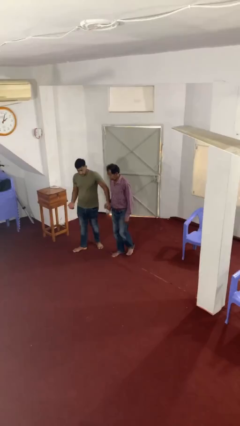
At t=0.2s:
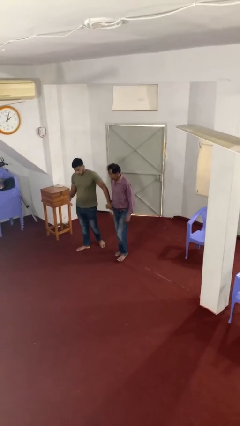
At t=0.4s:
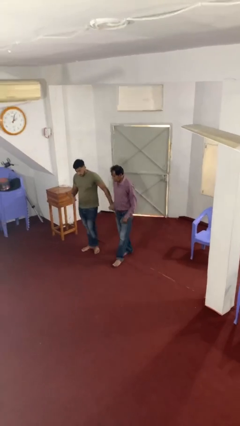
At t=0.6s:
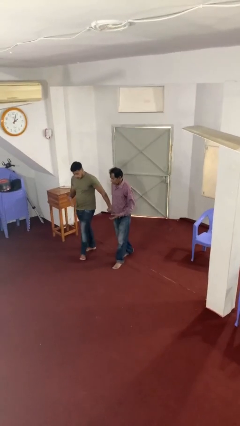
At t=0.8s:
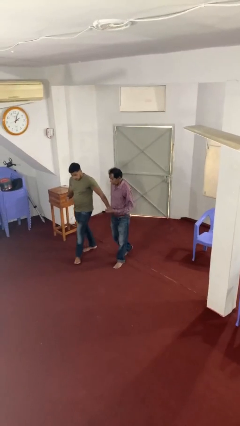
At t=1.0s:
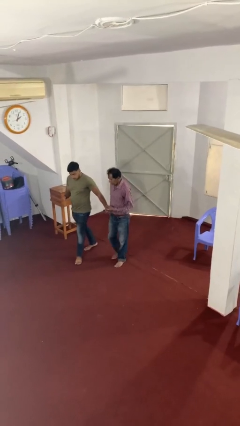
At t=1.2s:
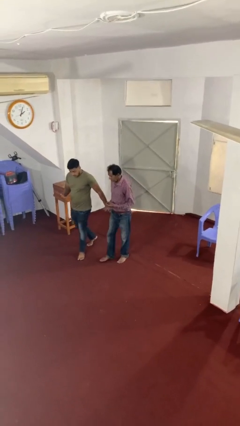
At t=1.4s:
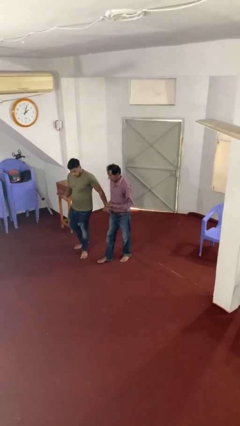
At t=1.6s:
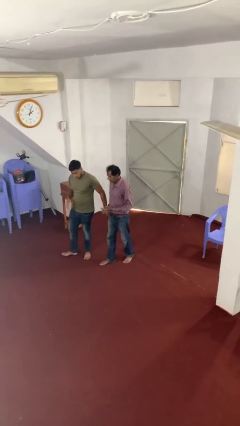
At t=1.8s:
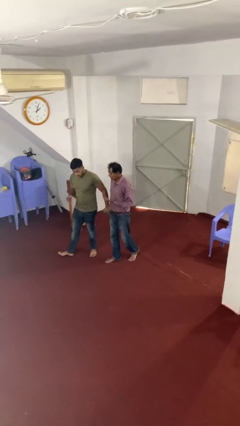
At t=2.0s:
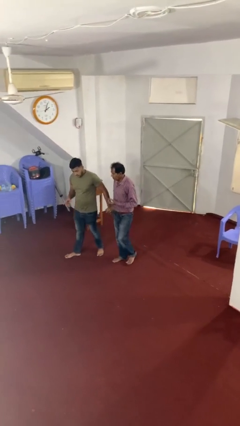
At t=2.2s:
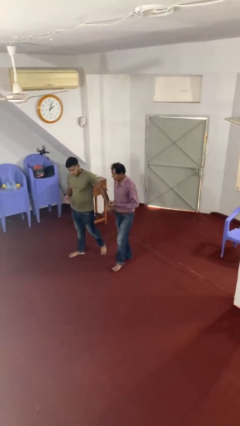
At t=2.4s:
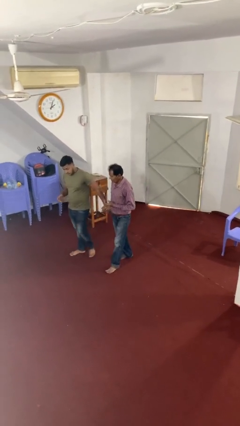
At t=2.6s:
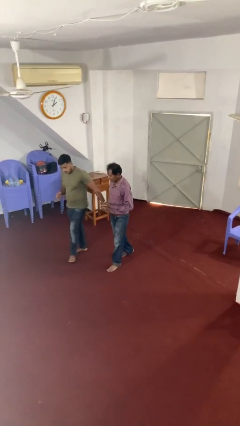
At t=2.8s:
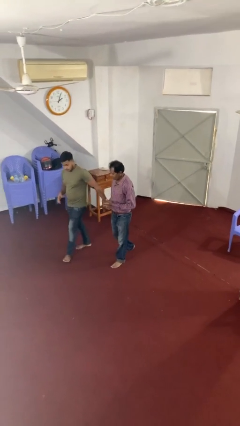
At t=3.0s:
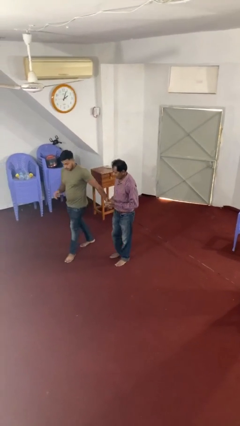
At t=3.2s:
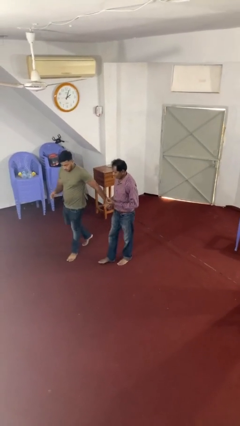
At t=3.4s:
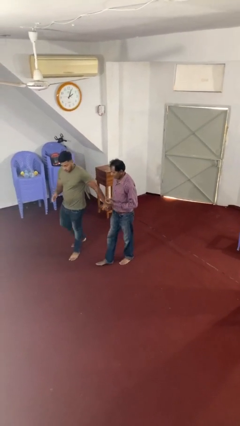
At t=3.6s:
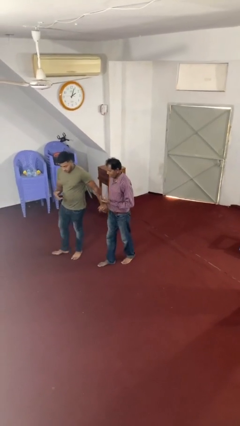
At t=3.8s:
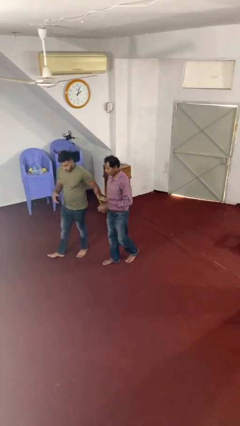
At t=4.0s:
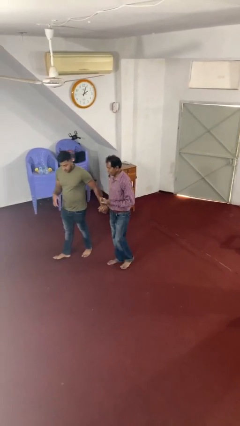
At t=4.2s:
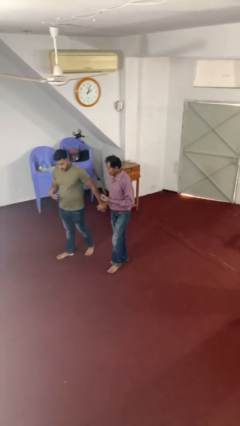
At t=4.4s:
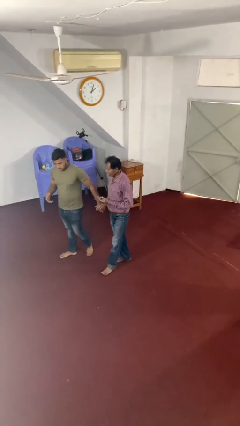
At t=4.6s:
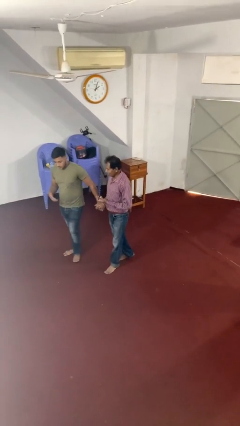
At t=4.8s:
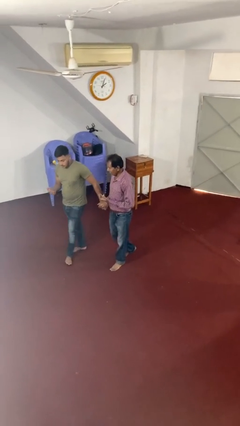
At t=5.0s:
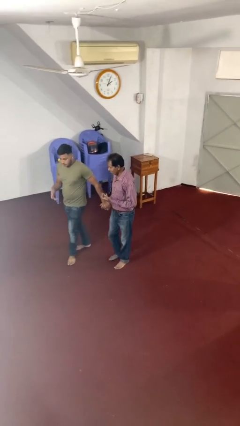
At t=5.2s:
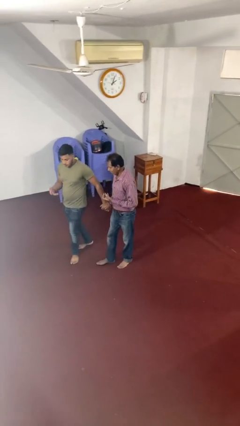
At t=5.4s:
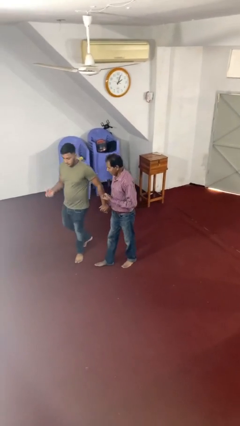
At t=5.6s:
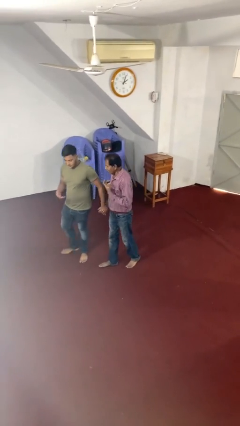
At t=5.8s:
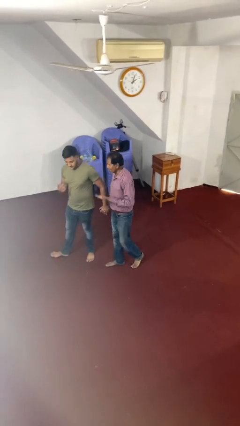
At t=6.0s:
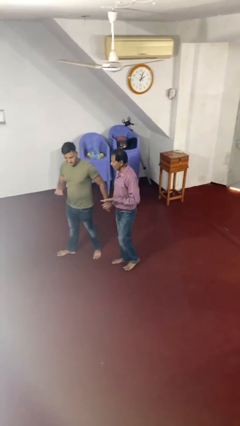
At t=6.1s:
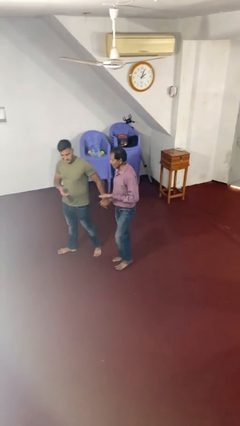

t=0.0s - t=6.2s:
person holds hand

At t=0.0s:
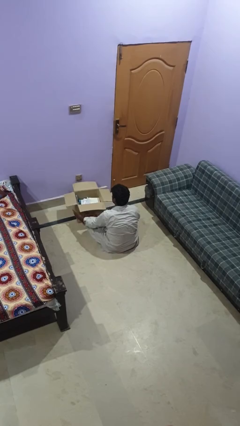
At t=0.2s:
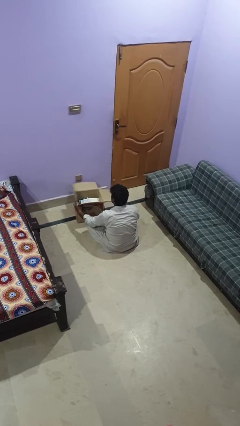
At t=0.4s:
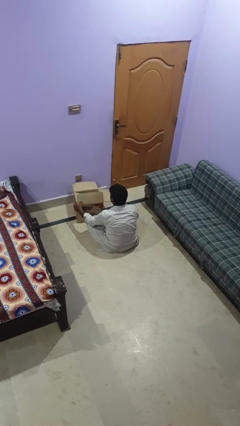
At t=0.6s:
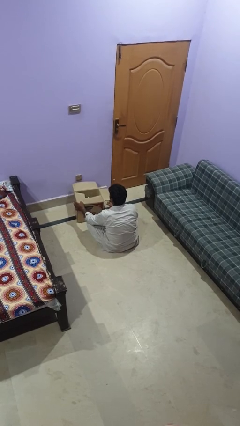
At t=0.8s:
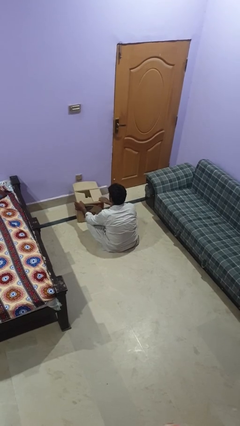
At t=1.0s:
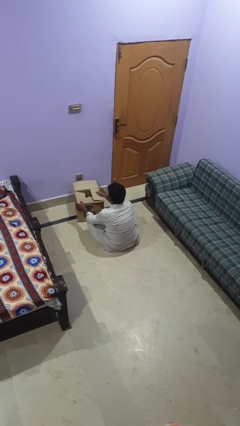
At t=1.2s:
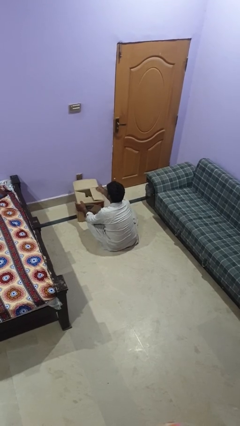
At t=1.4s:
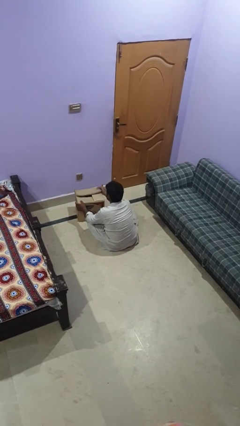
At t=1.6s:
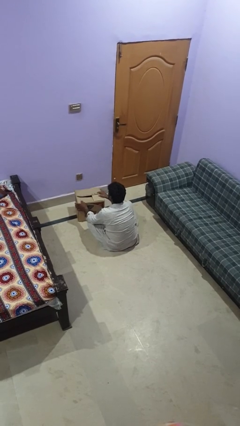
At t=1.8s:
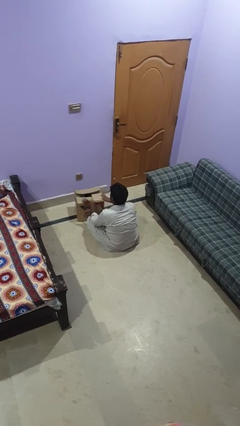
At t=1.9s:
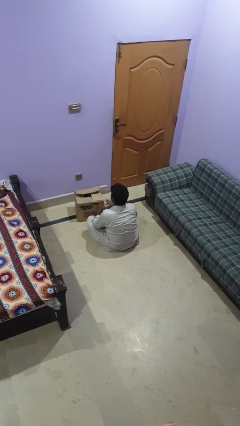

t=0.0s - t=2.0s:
person closes box

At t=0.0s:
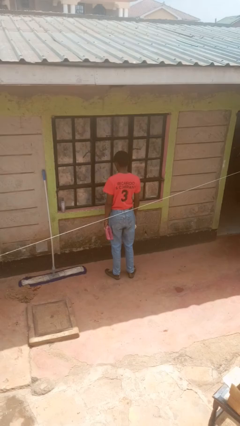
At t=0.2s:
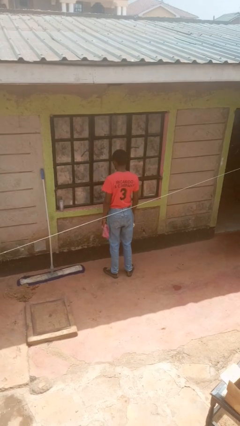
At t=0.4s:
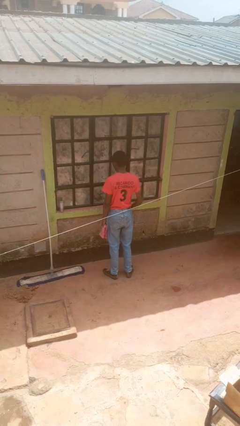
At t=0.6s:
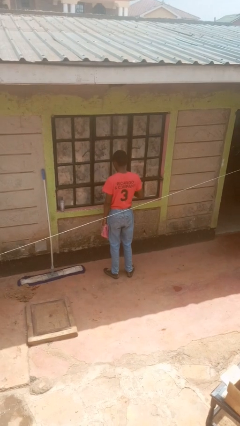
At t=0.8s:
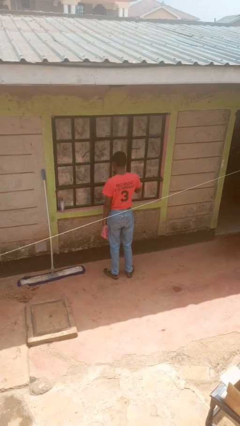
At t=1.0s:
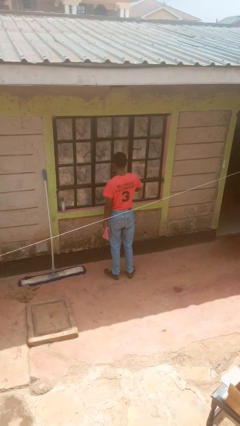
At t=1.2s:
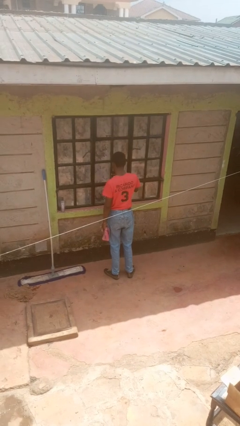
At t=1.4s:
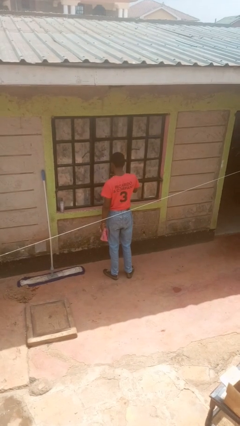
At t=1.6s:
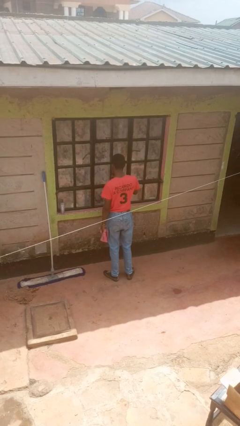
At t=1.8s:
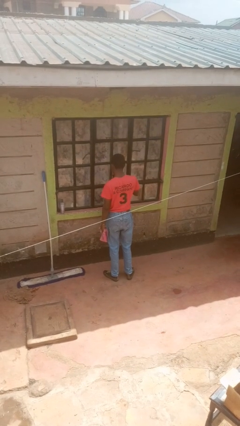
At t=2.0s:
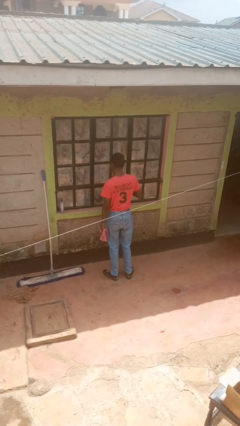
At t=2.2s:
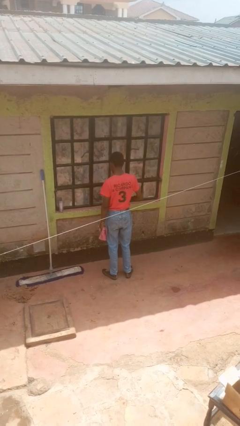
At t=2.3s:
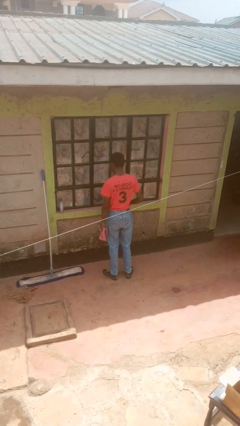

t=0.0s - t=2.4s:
person sprays from bottle

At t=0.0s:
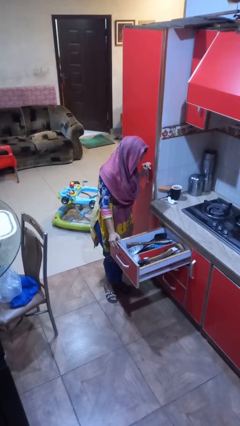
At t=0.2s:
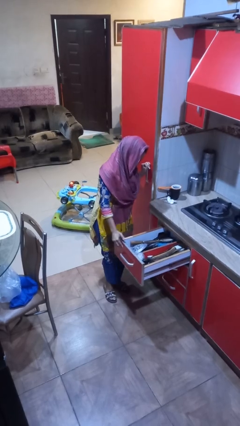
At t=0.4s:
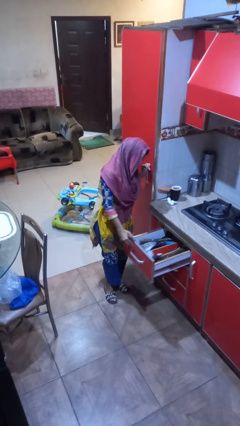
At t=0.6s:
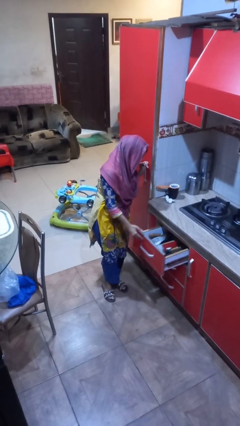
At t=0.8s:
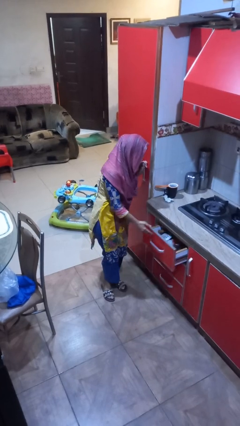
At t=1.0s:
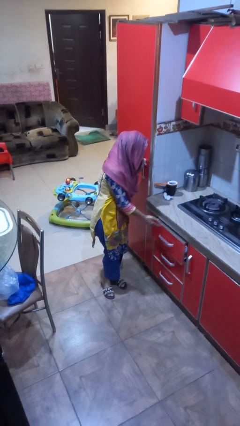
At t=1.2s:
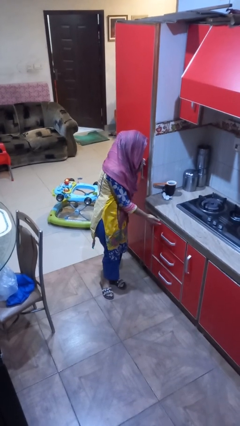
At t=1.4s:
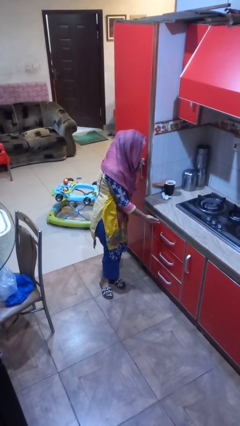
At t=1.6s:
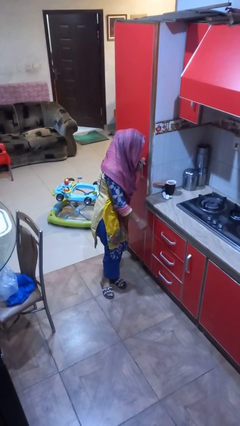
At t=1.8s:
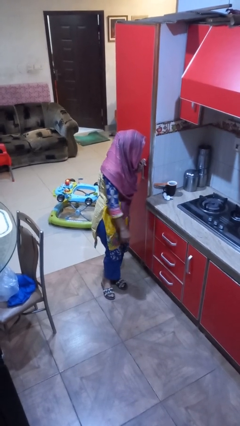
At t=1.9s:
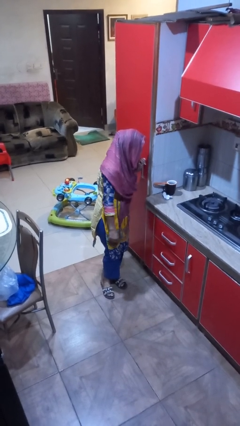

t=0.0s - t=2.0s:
person closes kitchen drawer

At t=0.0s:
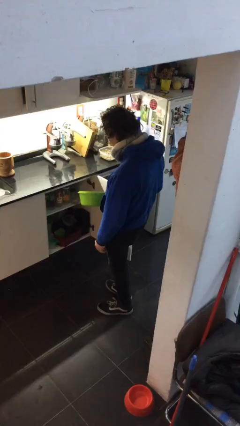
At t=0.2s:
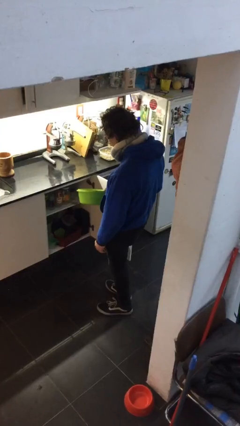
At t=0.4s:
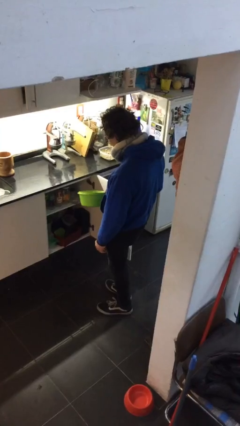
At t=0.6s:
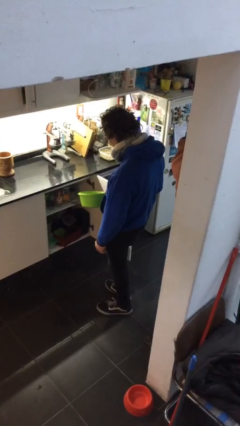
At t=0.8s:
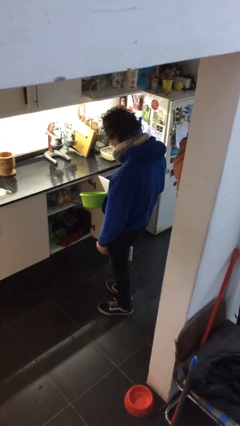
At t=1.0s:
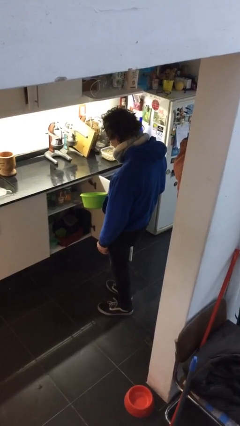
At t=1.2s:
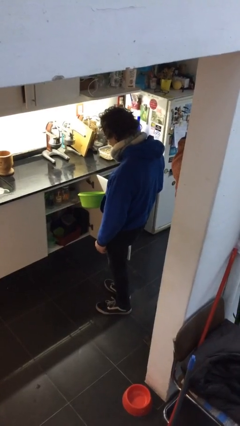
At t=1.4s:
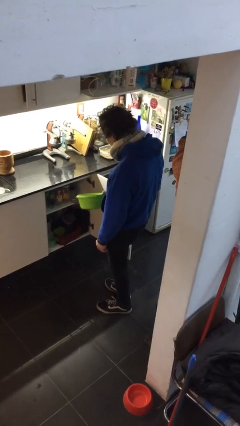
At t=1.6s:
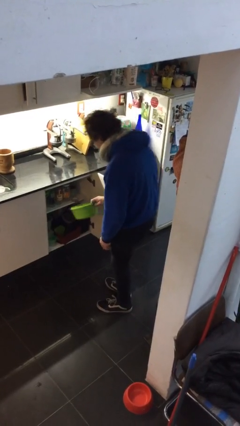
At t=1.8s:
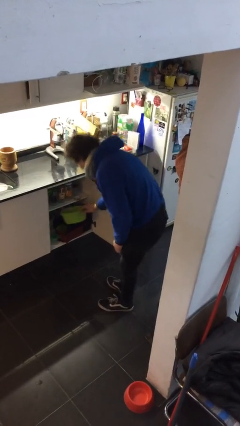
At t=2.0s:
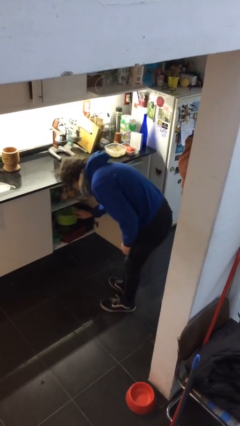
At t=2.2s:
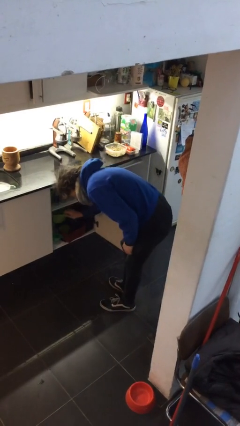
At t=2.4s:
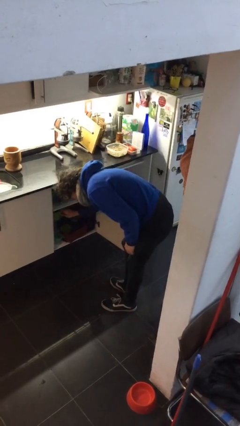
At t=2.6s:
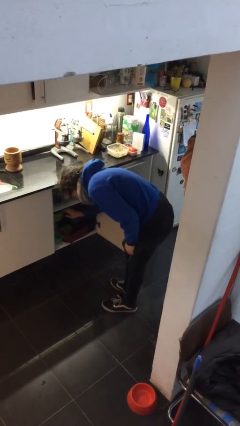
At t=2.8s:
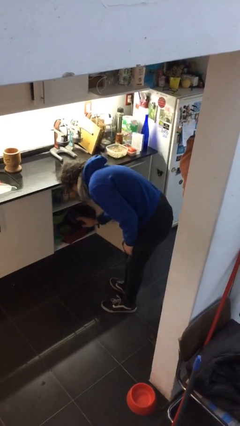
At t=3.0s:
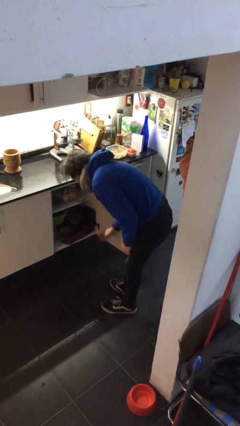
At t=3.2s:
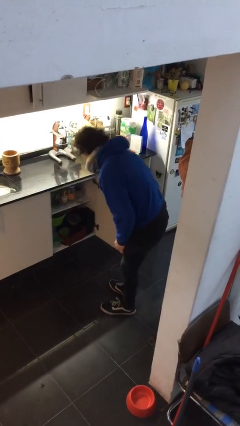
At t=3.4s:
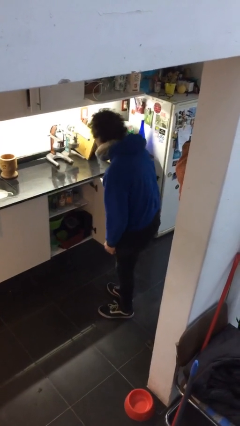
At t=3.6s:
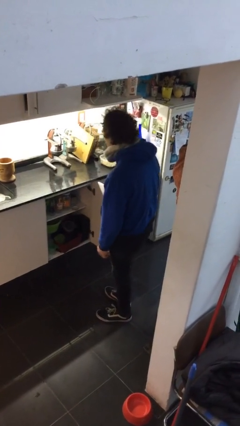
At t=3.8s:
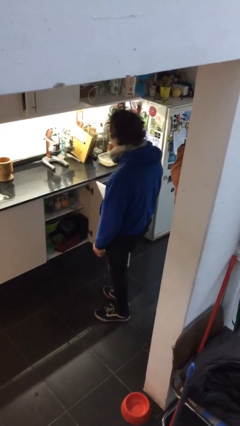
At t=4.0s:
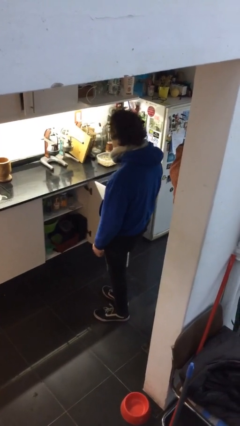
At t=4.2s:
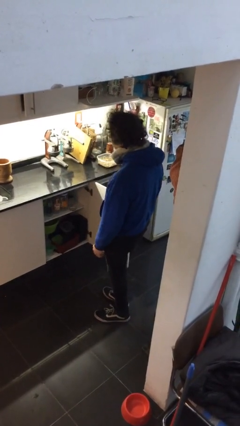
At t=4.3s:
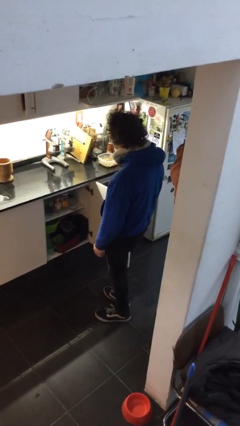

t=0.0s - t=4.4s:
person puts down object into cabinet

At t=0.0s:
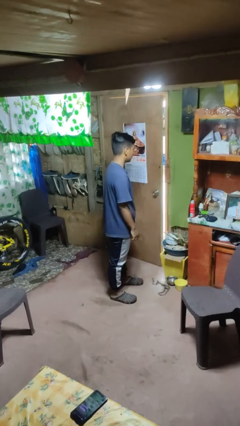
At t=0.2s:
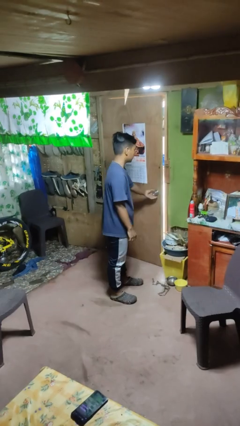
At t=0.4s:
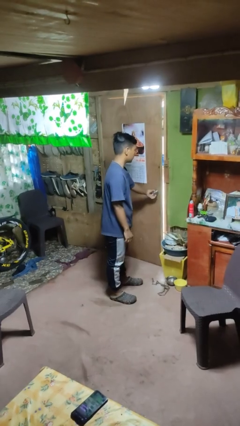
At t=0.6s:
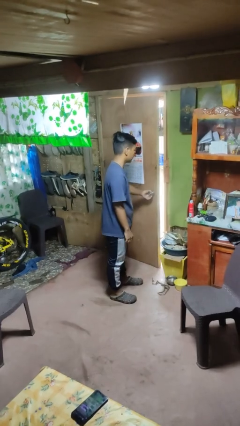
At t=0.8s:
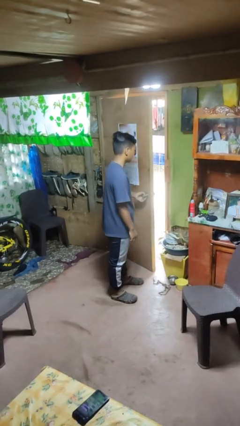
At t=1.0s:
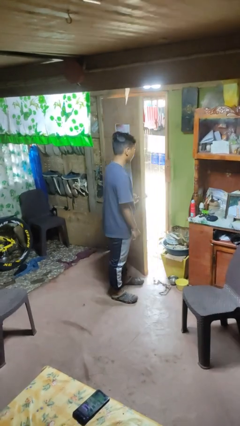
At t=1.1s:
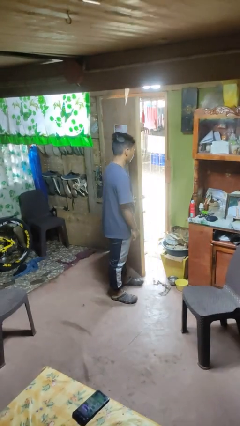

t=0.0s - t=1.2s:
person opens facility door
